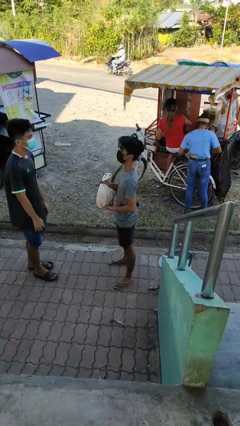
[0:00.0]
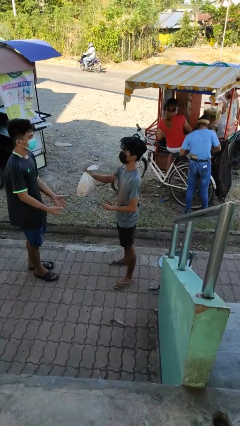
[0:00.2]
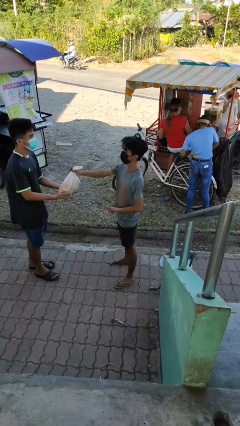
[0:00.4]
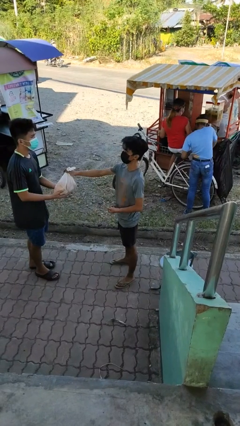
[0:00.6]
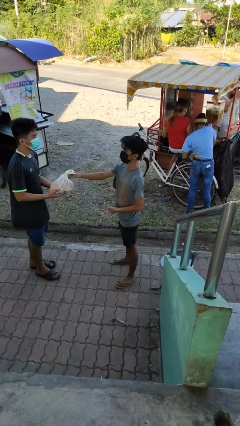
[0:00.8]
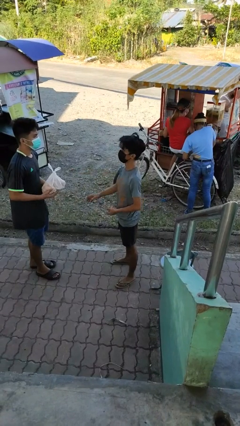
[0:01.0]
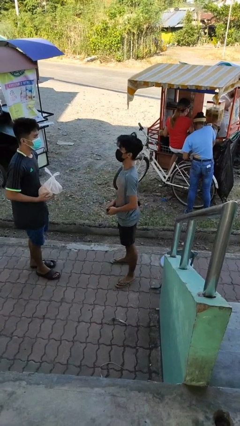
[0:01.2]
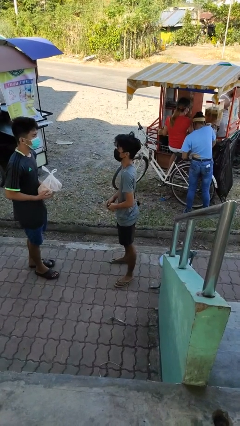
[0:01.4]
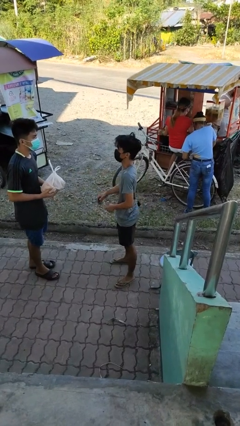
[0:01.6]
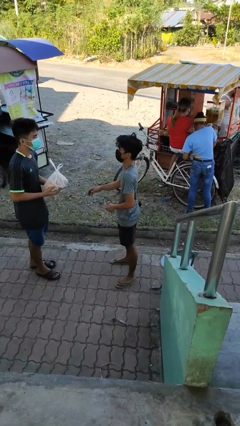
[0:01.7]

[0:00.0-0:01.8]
person transfers object to person

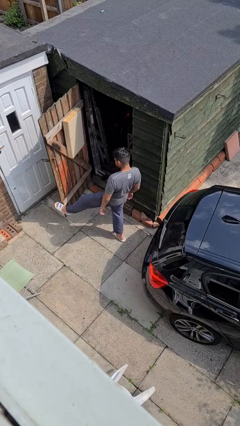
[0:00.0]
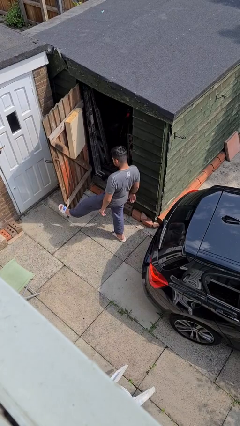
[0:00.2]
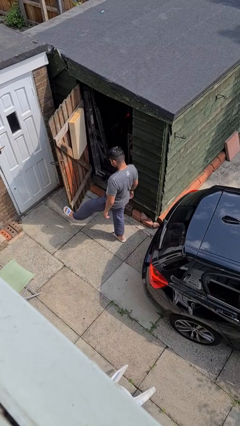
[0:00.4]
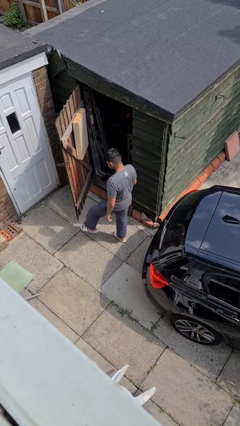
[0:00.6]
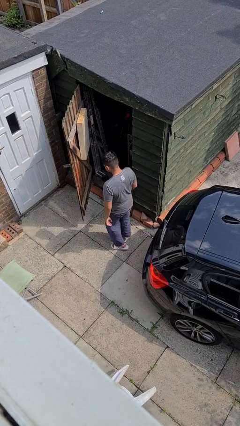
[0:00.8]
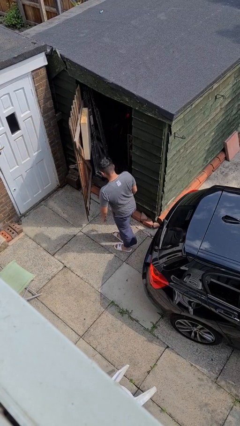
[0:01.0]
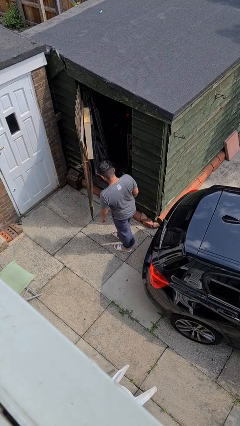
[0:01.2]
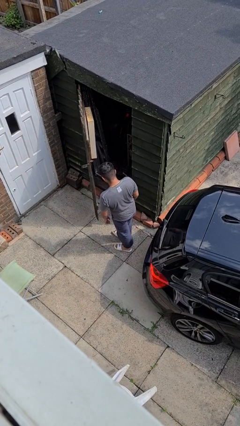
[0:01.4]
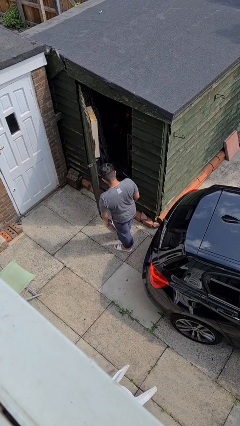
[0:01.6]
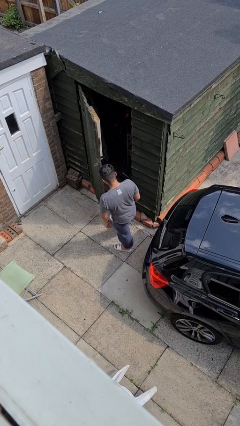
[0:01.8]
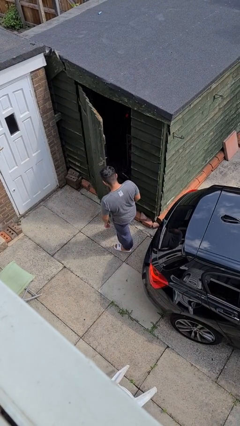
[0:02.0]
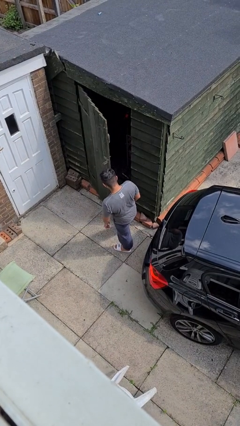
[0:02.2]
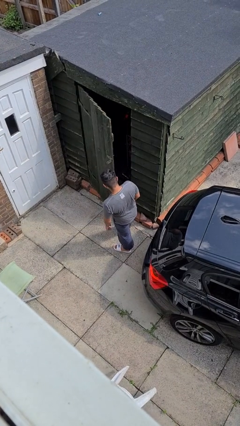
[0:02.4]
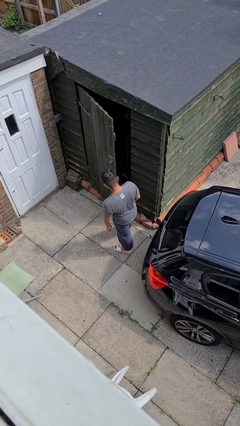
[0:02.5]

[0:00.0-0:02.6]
person closes door with foot

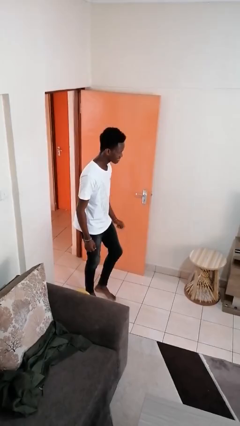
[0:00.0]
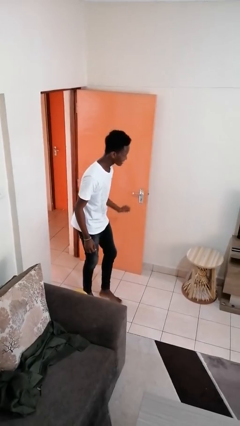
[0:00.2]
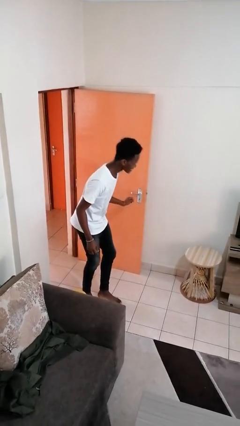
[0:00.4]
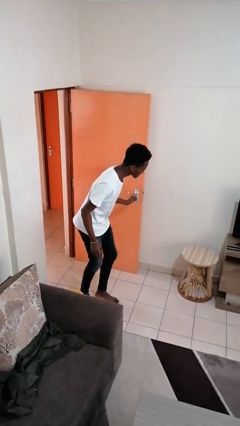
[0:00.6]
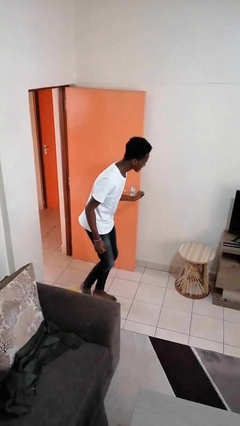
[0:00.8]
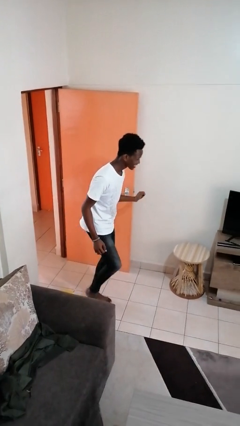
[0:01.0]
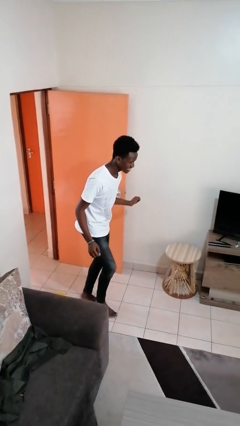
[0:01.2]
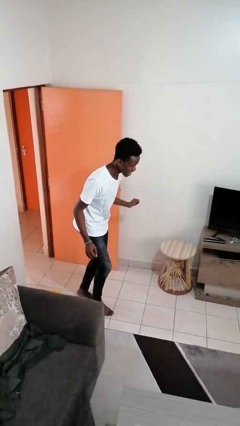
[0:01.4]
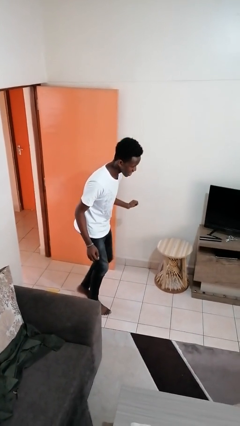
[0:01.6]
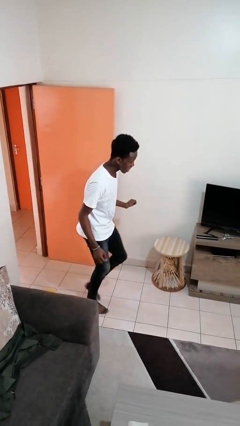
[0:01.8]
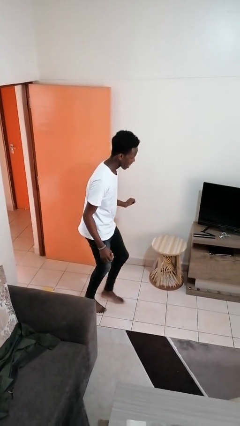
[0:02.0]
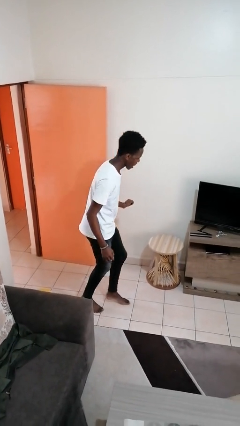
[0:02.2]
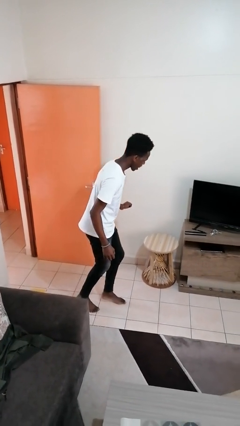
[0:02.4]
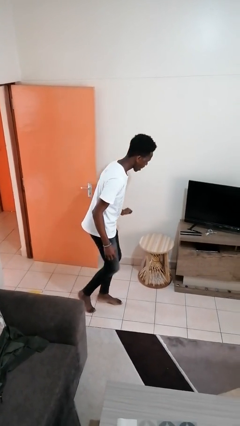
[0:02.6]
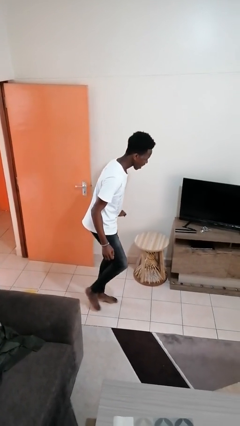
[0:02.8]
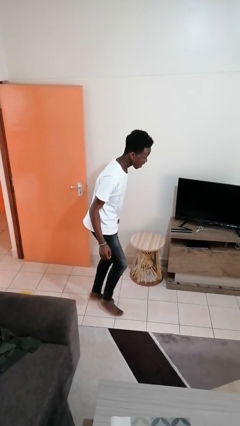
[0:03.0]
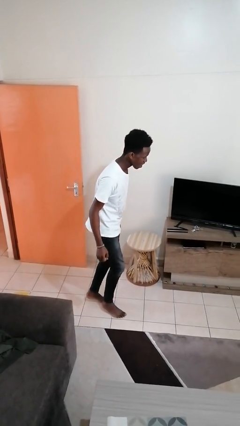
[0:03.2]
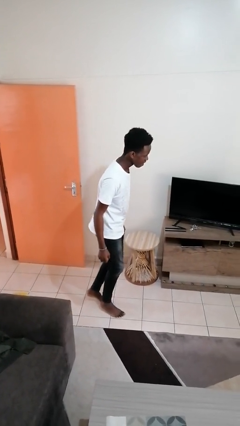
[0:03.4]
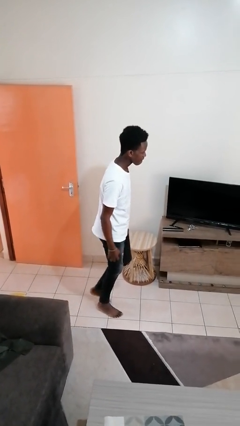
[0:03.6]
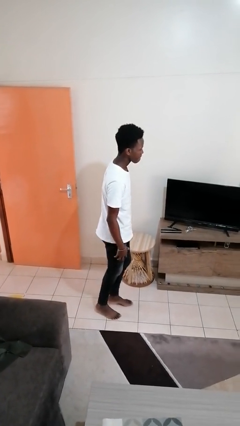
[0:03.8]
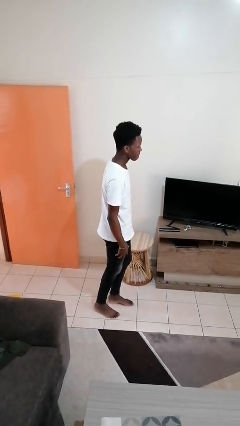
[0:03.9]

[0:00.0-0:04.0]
person walks tiptoe

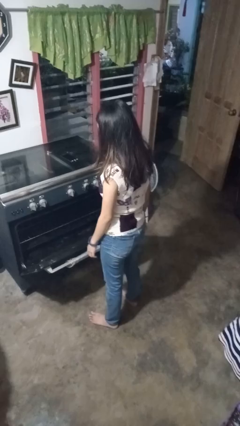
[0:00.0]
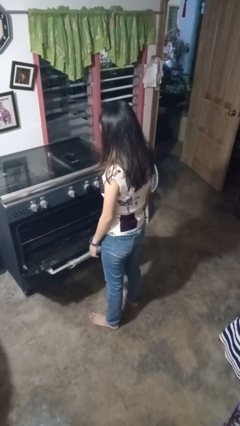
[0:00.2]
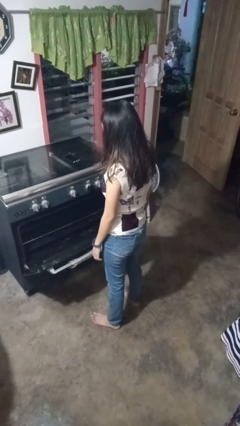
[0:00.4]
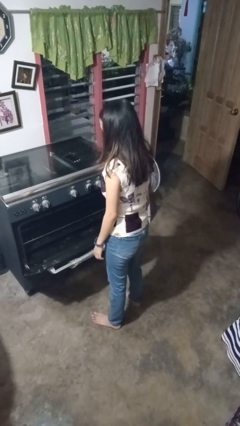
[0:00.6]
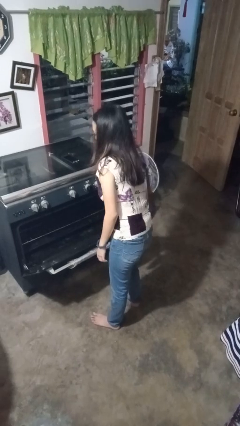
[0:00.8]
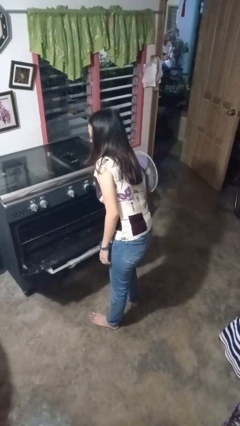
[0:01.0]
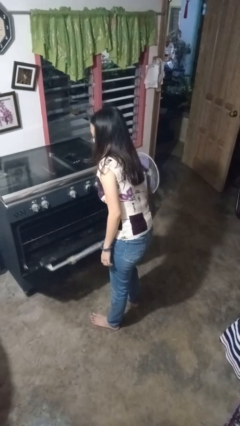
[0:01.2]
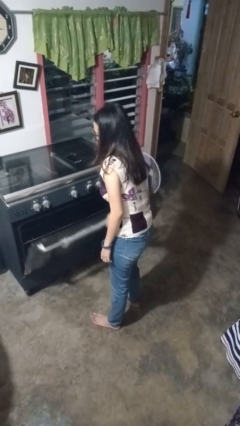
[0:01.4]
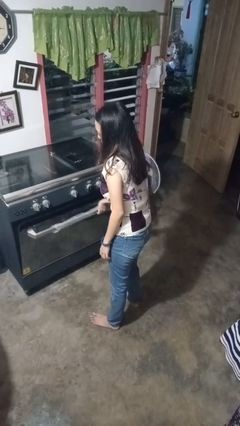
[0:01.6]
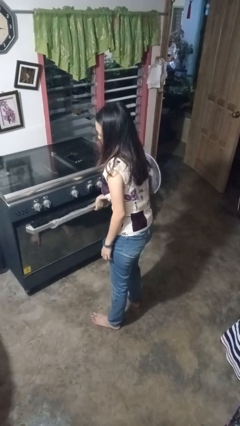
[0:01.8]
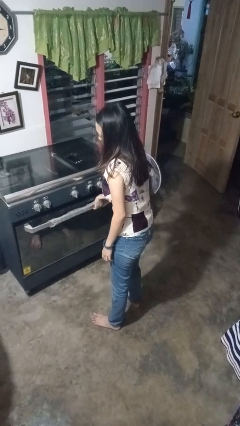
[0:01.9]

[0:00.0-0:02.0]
person closes oven door

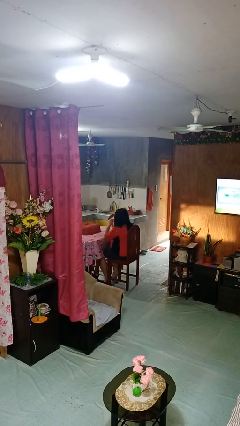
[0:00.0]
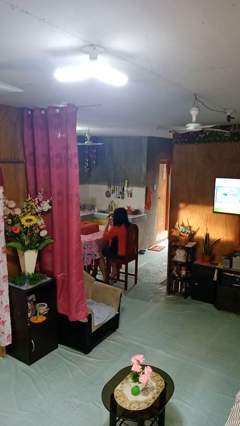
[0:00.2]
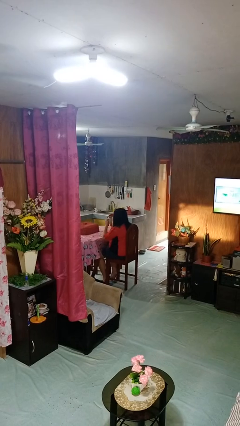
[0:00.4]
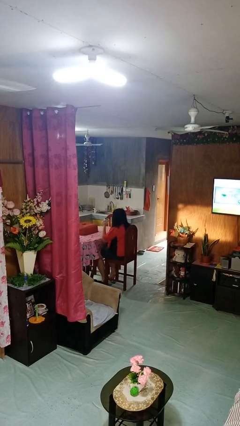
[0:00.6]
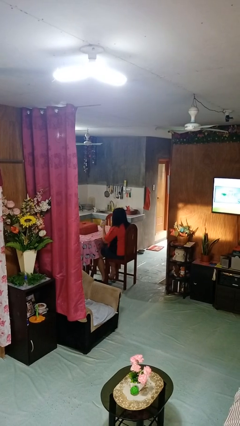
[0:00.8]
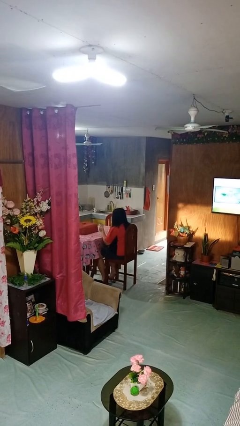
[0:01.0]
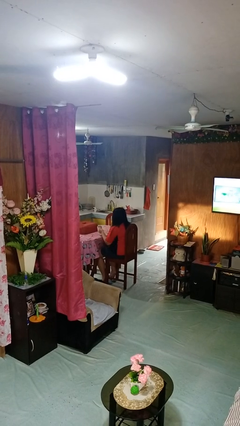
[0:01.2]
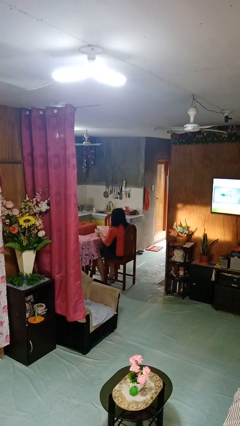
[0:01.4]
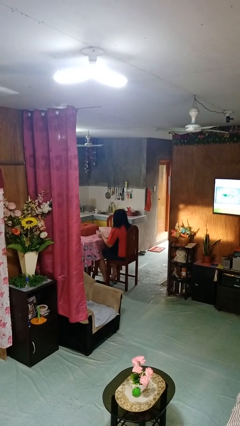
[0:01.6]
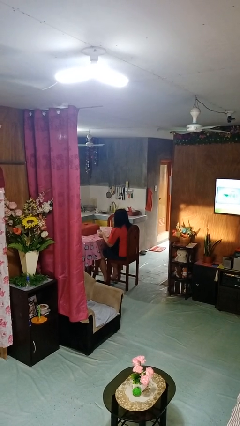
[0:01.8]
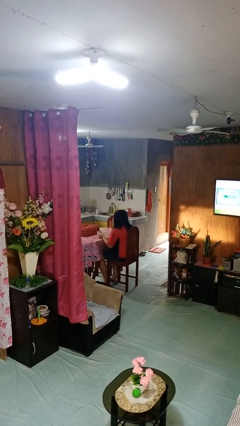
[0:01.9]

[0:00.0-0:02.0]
person puts down object on table

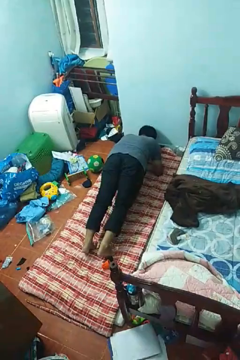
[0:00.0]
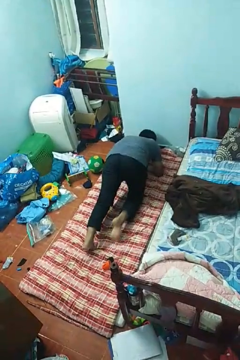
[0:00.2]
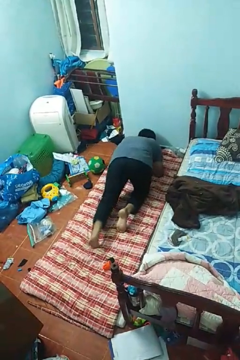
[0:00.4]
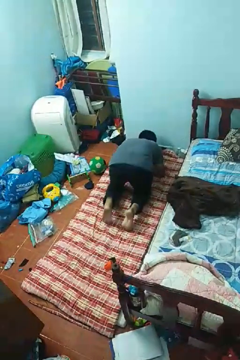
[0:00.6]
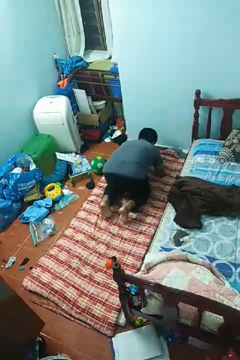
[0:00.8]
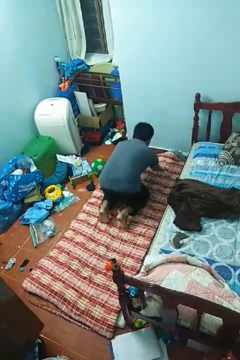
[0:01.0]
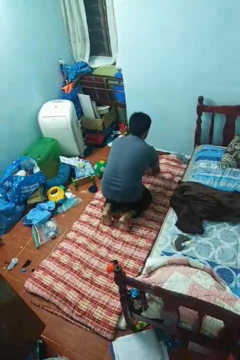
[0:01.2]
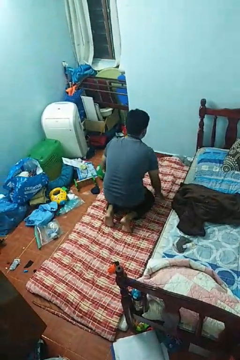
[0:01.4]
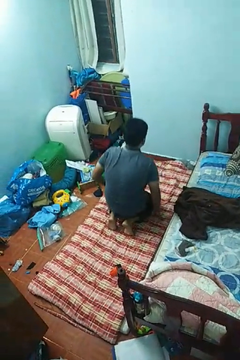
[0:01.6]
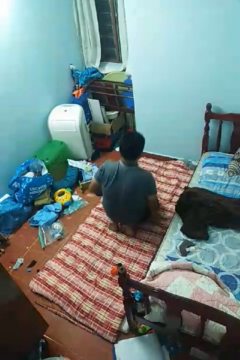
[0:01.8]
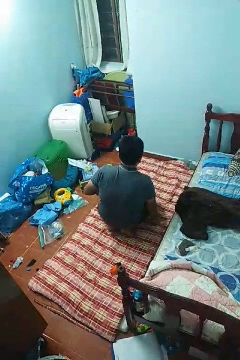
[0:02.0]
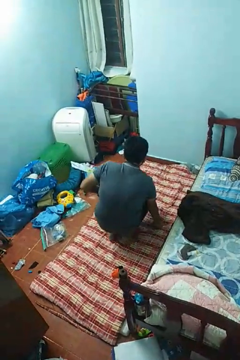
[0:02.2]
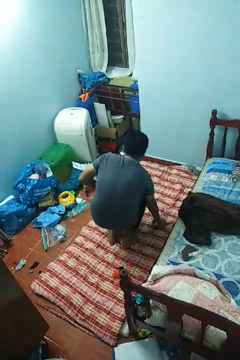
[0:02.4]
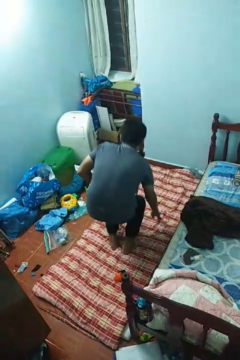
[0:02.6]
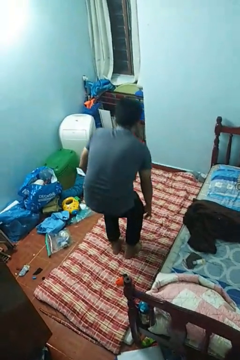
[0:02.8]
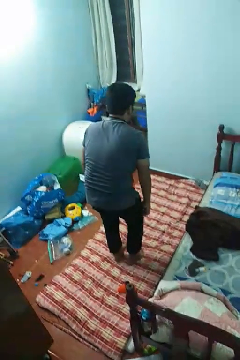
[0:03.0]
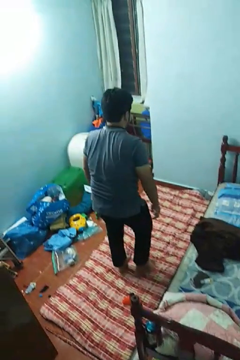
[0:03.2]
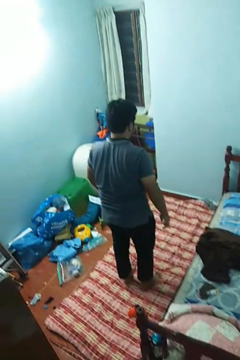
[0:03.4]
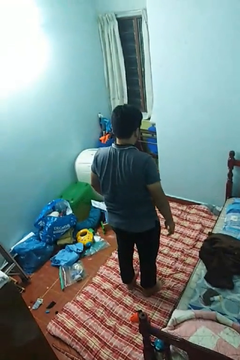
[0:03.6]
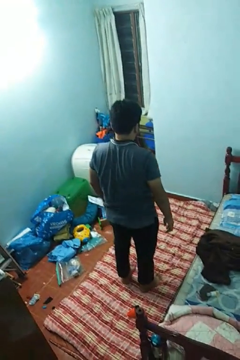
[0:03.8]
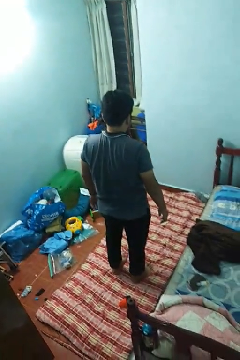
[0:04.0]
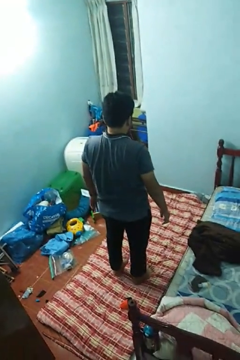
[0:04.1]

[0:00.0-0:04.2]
person stands up from floor

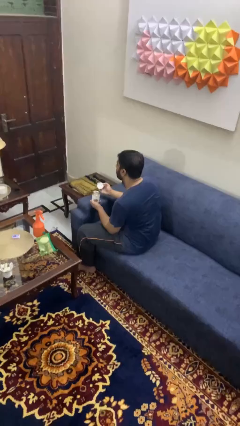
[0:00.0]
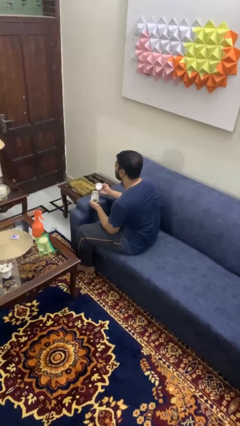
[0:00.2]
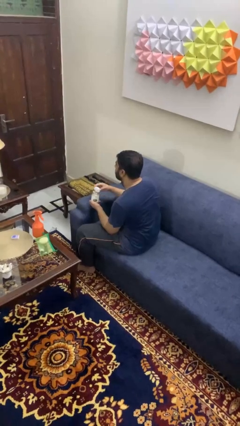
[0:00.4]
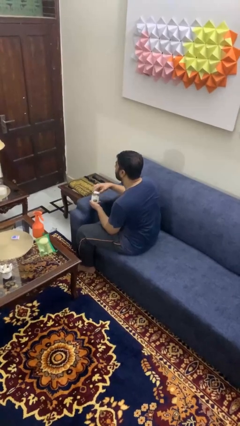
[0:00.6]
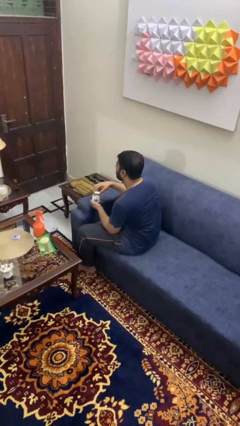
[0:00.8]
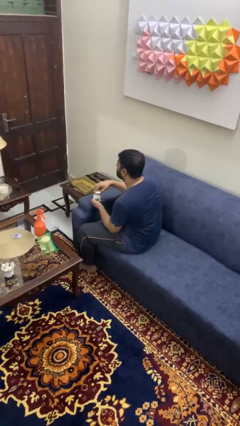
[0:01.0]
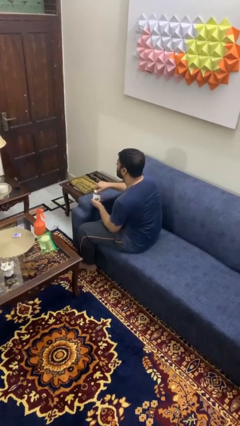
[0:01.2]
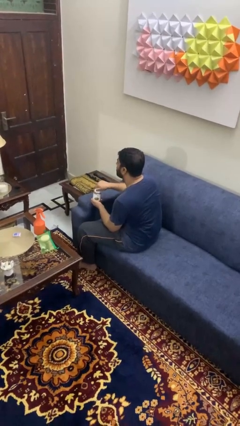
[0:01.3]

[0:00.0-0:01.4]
person closes jar
